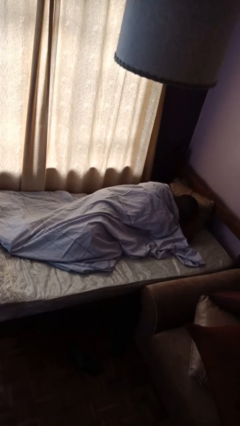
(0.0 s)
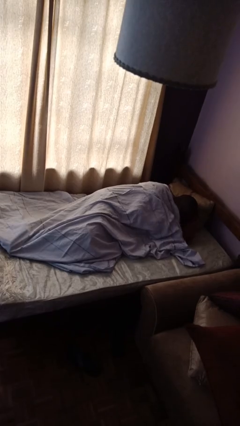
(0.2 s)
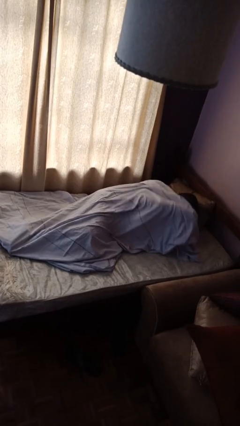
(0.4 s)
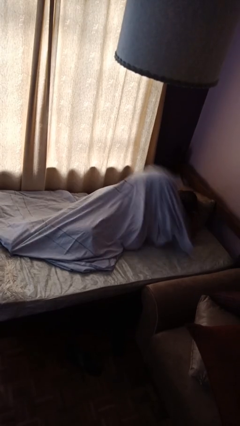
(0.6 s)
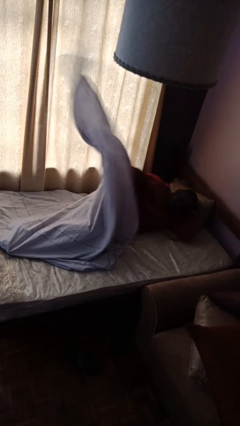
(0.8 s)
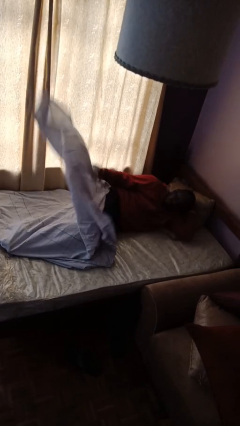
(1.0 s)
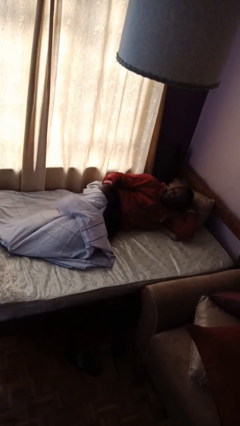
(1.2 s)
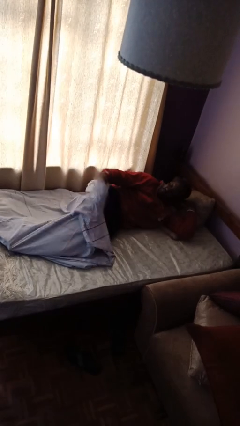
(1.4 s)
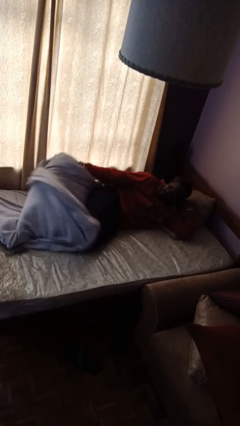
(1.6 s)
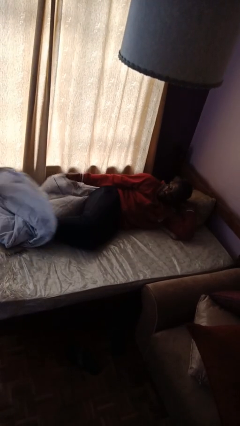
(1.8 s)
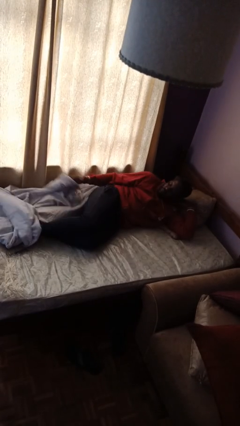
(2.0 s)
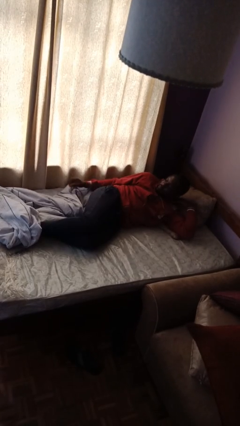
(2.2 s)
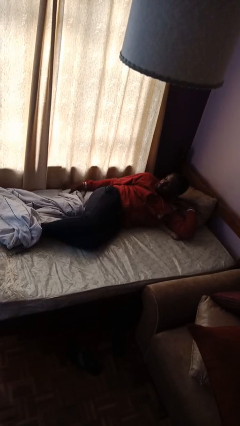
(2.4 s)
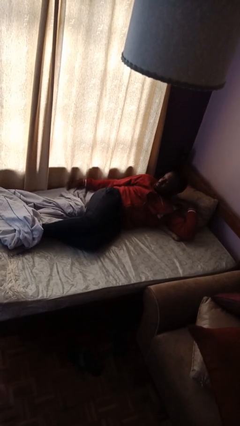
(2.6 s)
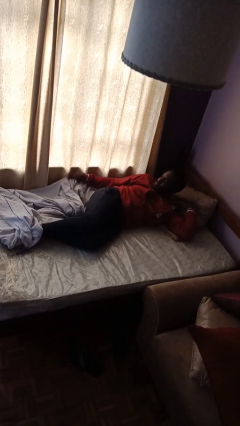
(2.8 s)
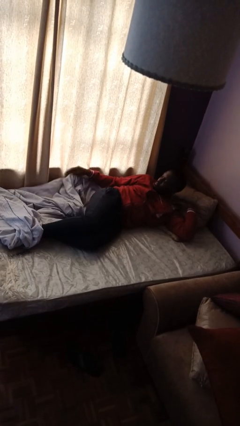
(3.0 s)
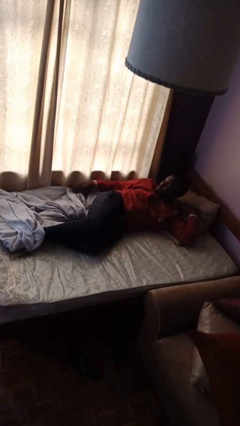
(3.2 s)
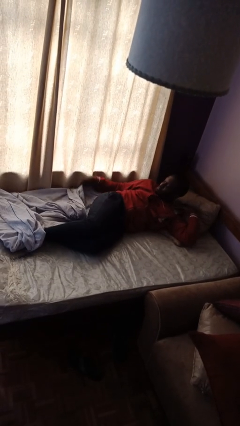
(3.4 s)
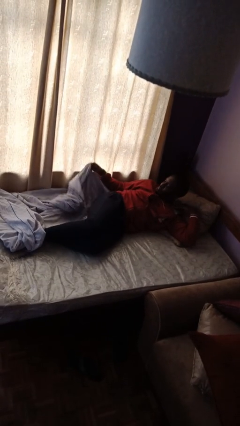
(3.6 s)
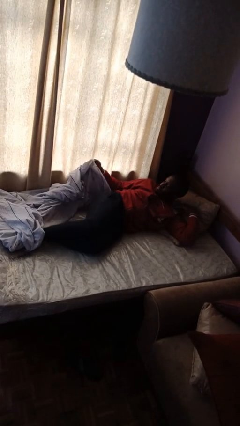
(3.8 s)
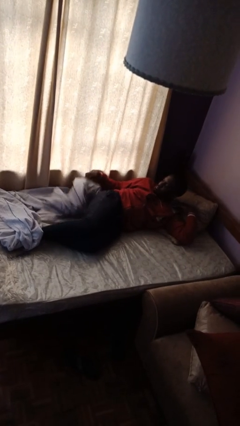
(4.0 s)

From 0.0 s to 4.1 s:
person uncovers with bedsheets

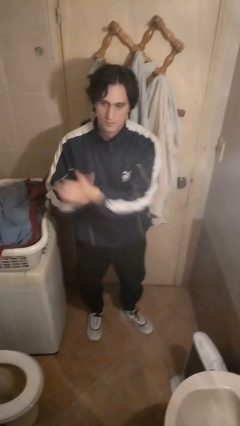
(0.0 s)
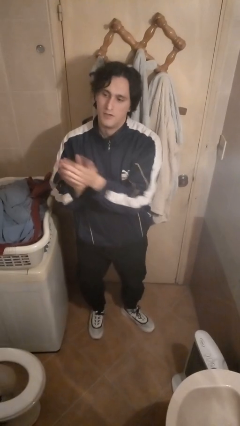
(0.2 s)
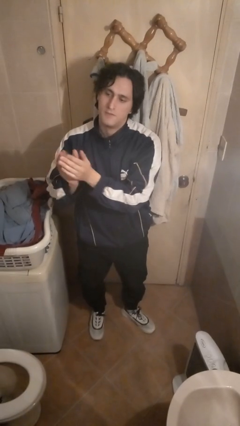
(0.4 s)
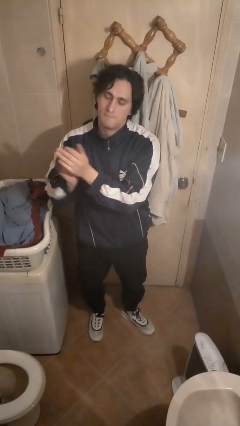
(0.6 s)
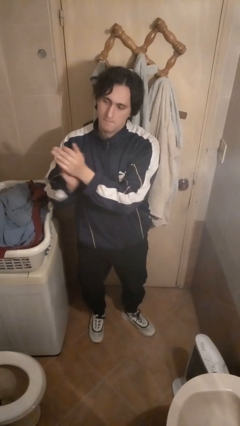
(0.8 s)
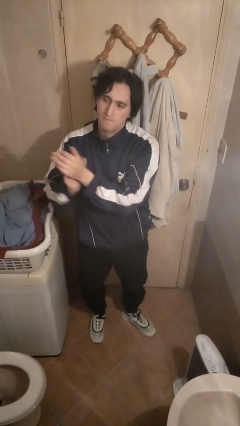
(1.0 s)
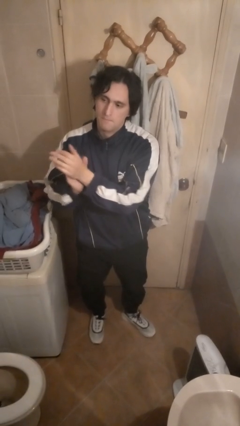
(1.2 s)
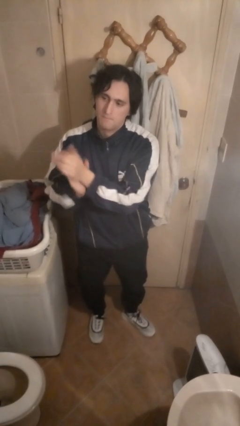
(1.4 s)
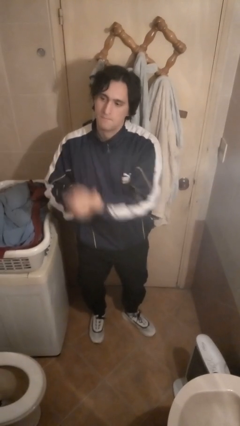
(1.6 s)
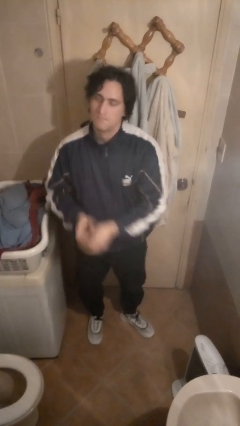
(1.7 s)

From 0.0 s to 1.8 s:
person claps hands

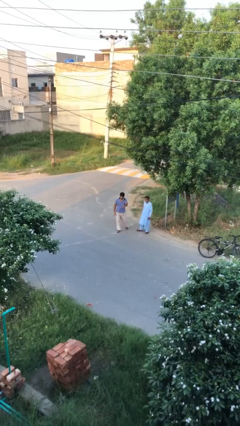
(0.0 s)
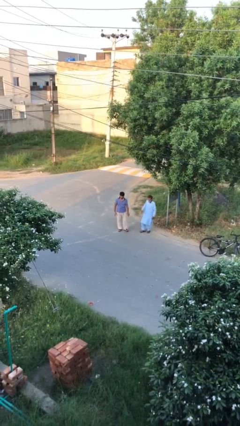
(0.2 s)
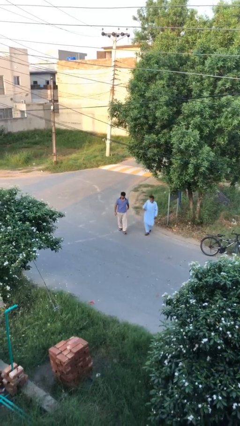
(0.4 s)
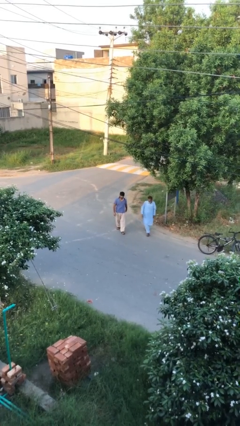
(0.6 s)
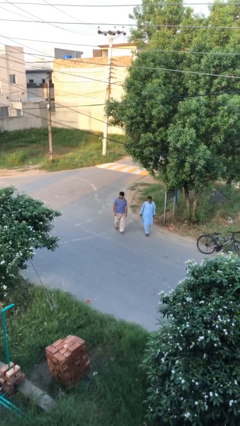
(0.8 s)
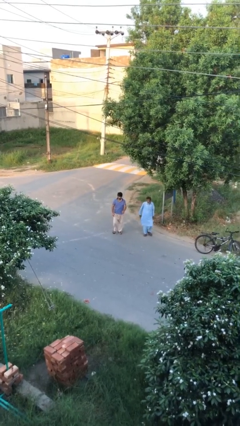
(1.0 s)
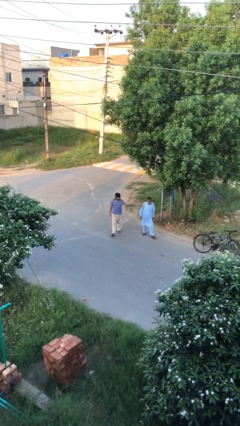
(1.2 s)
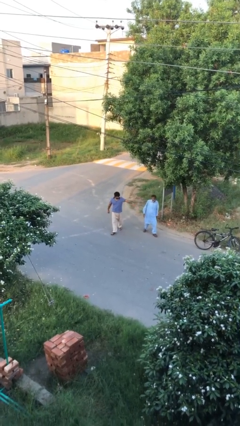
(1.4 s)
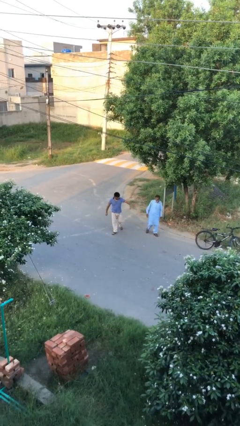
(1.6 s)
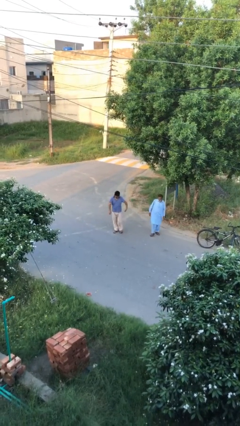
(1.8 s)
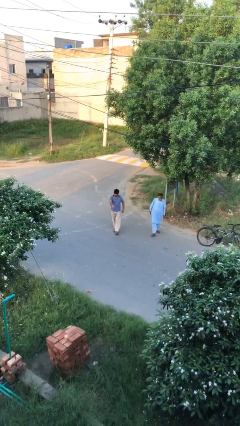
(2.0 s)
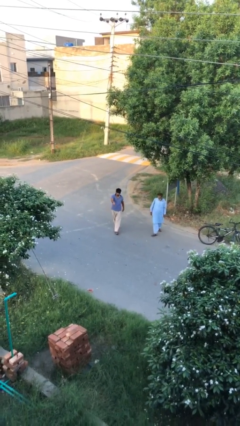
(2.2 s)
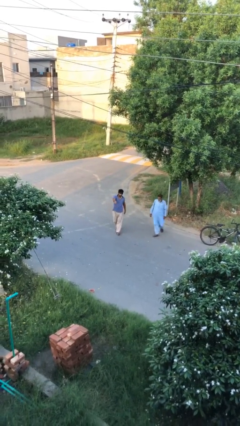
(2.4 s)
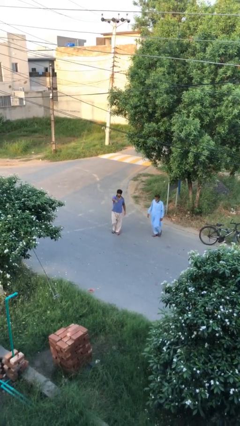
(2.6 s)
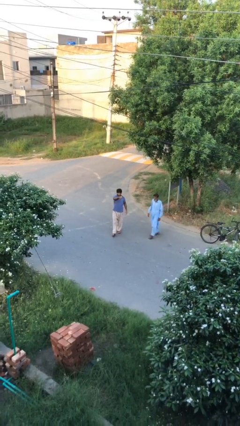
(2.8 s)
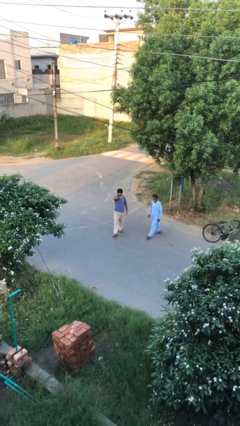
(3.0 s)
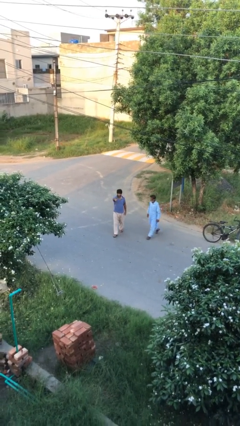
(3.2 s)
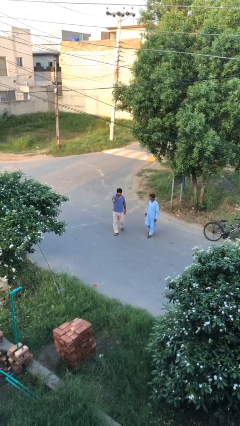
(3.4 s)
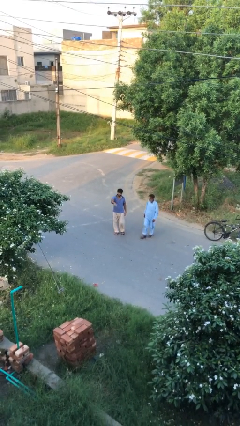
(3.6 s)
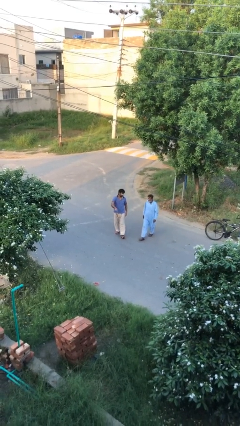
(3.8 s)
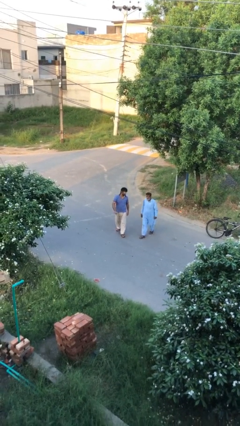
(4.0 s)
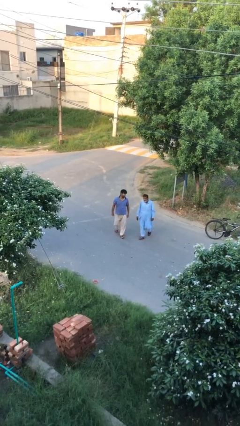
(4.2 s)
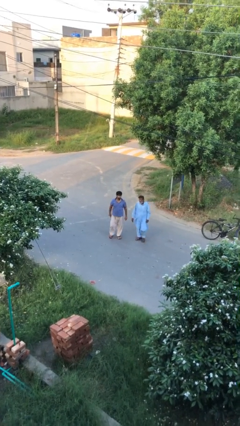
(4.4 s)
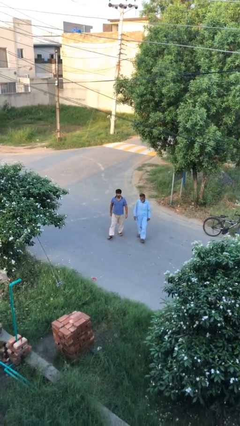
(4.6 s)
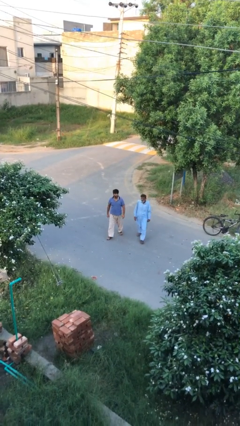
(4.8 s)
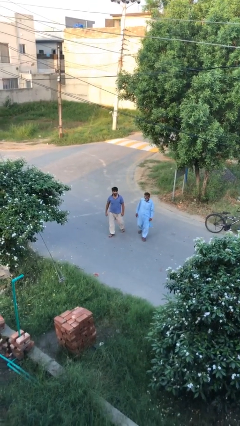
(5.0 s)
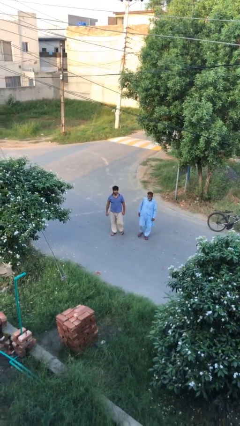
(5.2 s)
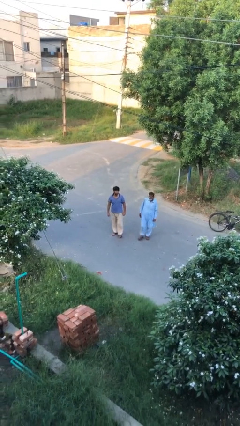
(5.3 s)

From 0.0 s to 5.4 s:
person talks to person

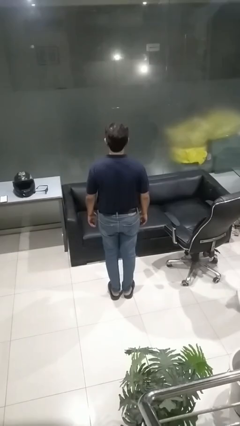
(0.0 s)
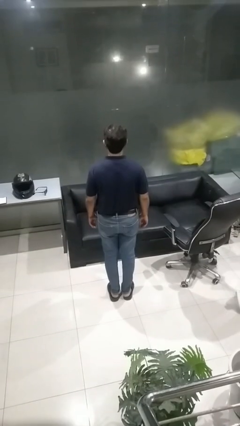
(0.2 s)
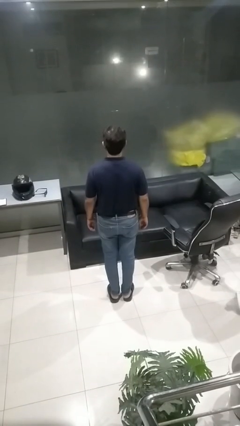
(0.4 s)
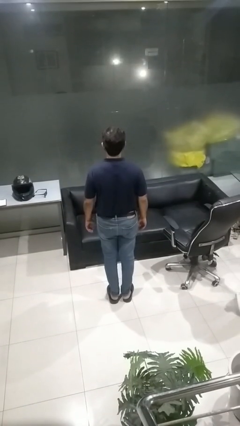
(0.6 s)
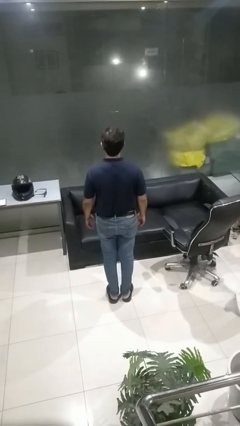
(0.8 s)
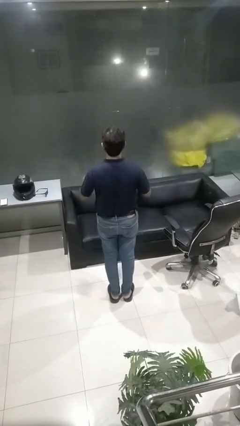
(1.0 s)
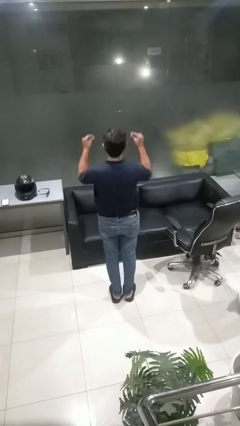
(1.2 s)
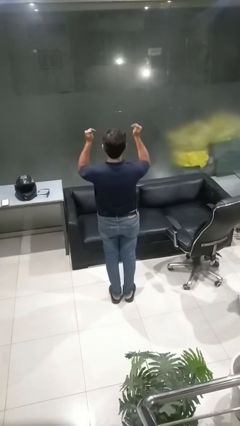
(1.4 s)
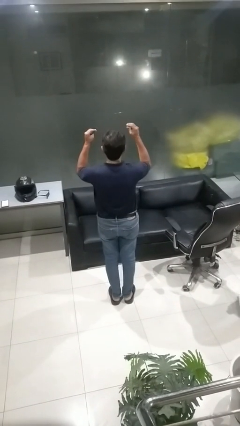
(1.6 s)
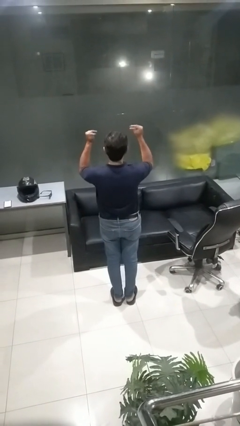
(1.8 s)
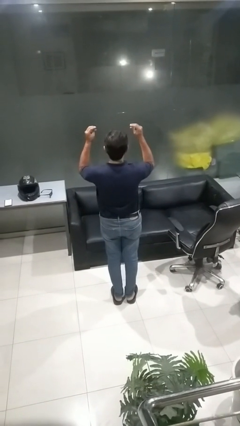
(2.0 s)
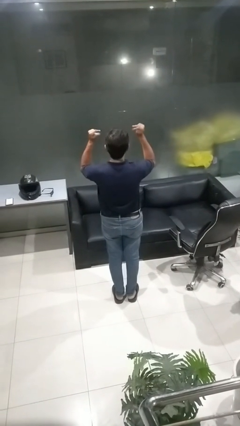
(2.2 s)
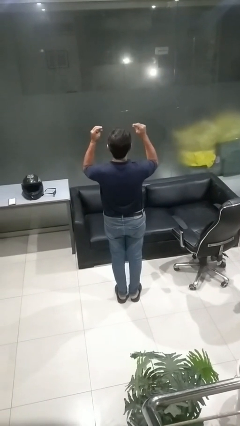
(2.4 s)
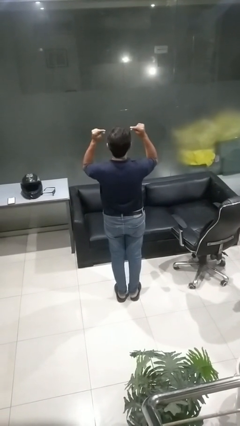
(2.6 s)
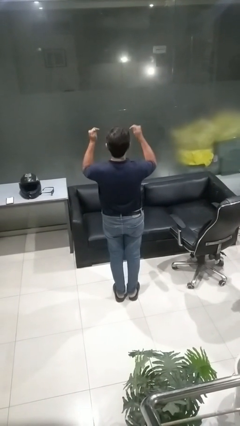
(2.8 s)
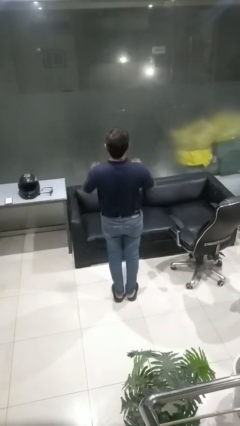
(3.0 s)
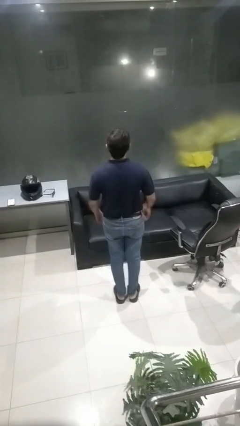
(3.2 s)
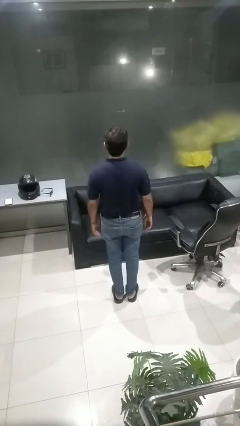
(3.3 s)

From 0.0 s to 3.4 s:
person snaps fingers

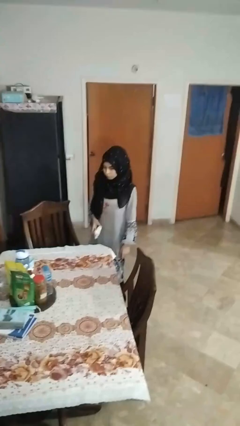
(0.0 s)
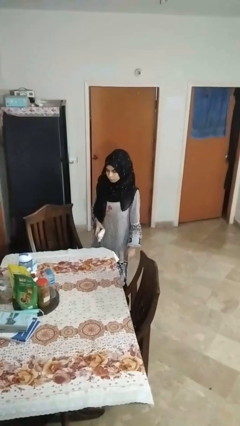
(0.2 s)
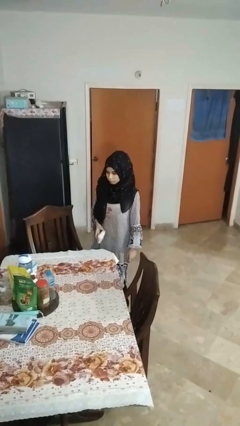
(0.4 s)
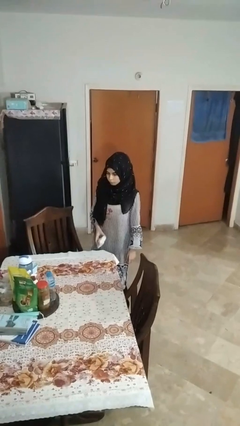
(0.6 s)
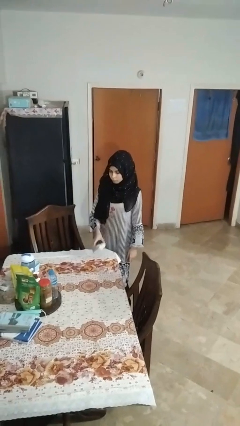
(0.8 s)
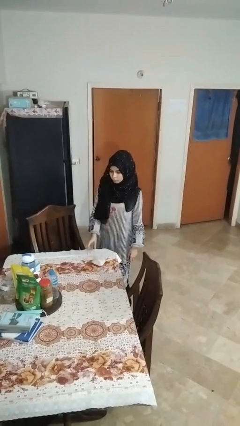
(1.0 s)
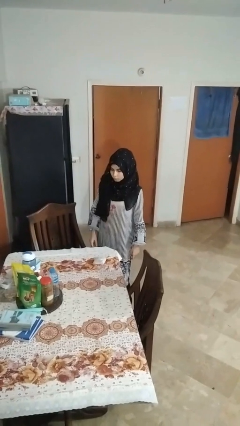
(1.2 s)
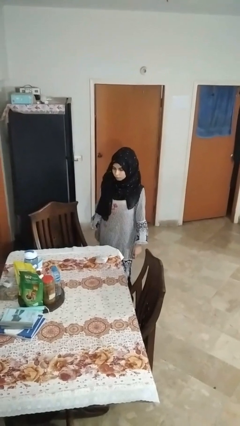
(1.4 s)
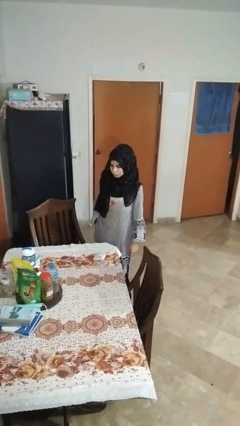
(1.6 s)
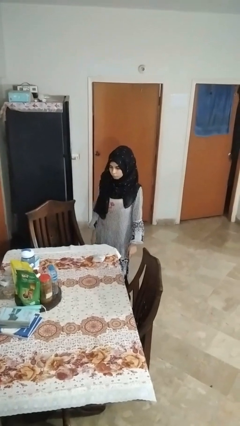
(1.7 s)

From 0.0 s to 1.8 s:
person throws object on table

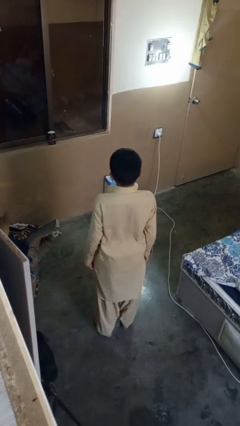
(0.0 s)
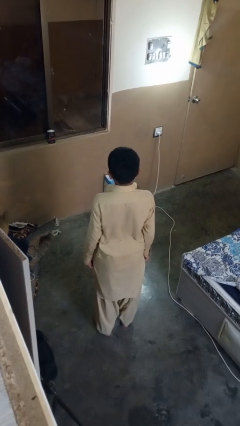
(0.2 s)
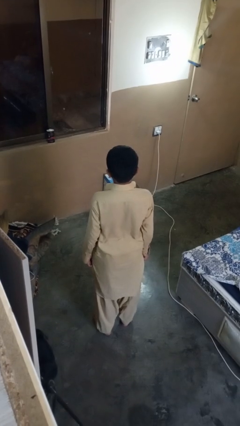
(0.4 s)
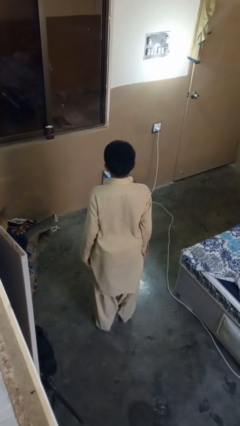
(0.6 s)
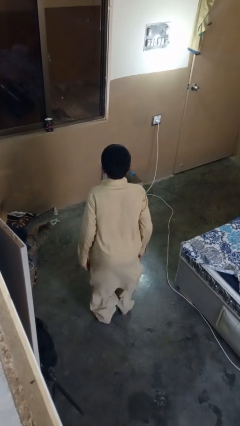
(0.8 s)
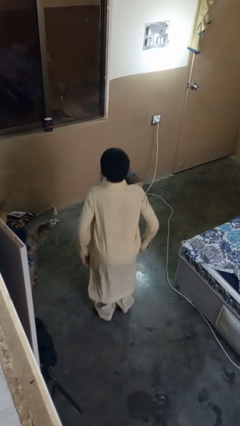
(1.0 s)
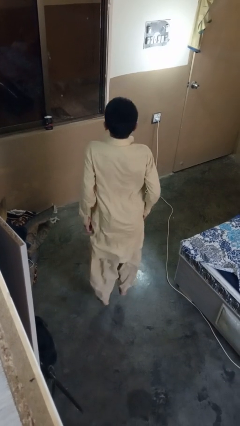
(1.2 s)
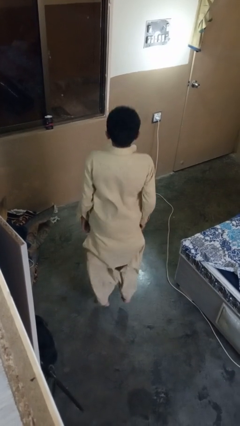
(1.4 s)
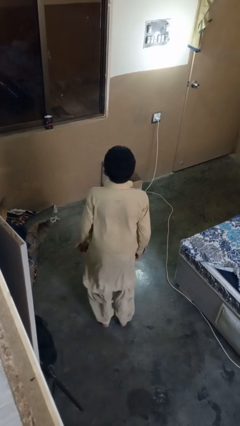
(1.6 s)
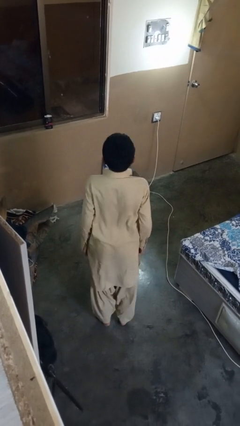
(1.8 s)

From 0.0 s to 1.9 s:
person jumps
